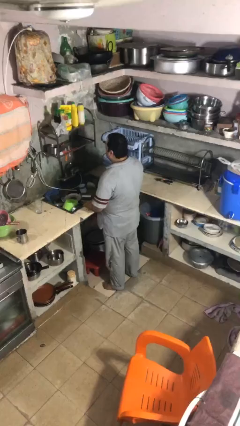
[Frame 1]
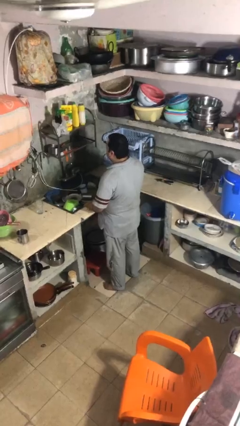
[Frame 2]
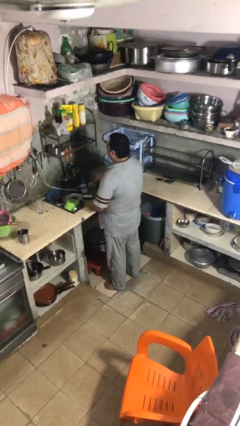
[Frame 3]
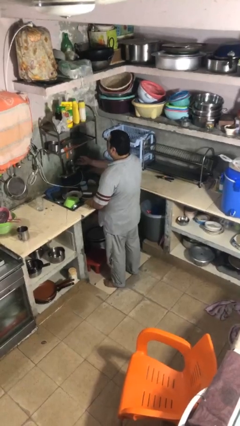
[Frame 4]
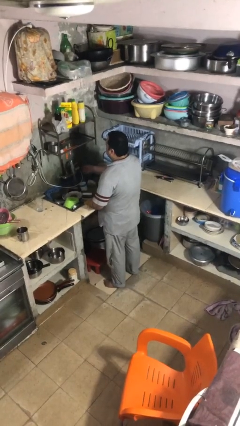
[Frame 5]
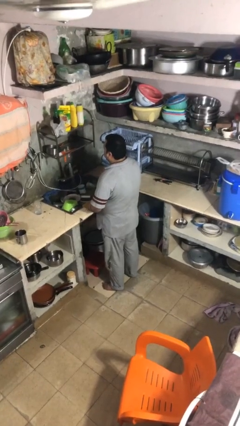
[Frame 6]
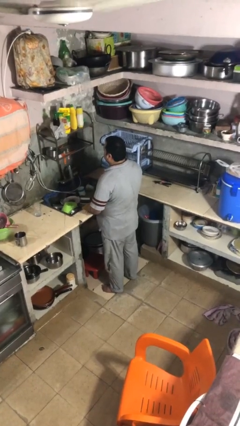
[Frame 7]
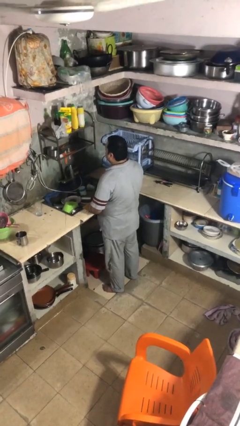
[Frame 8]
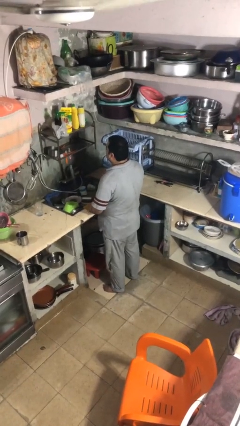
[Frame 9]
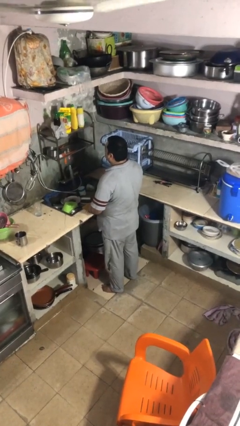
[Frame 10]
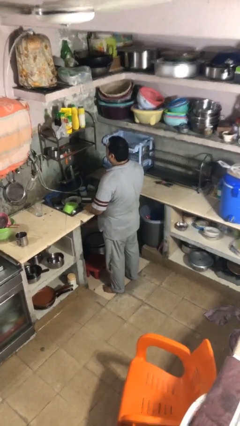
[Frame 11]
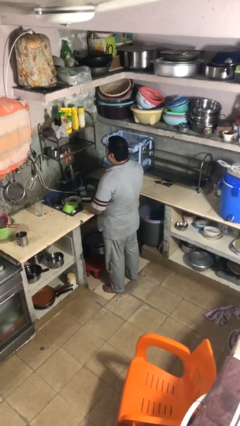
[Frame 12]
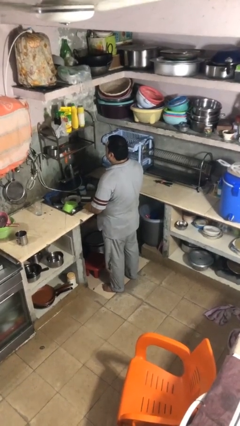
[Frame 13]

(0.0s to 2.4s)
person turns on faucet

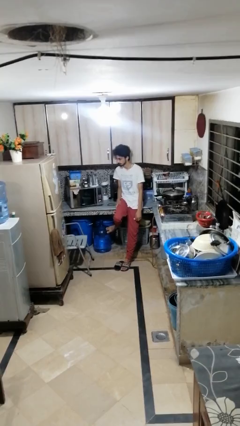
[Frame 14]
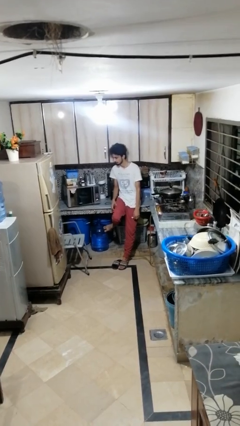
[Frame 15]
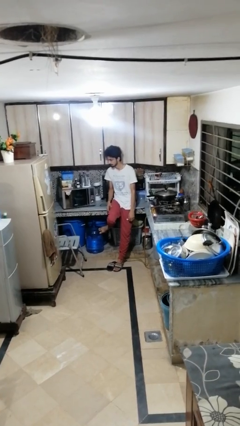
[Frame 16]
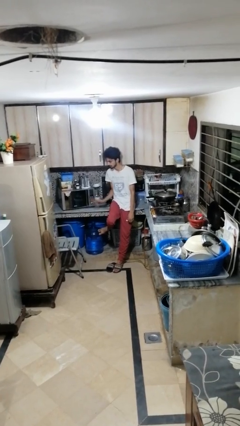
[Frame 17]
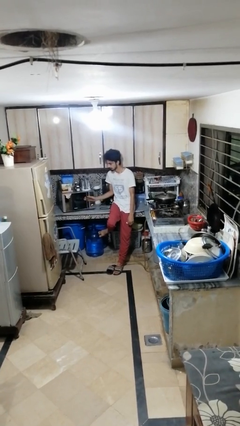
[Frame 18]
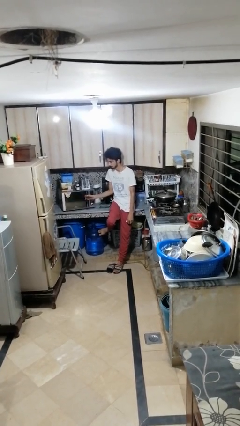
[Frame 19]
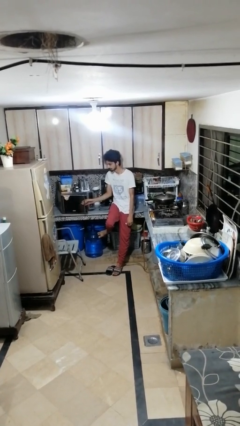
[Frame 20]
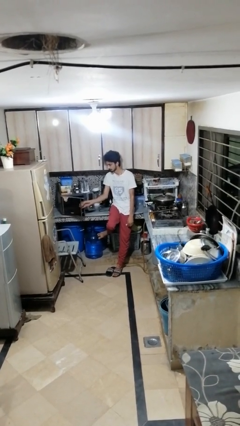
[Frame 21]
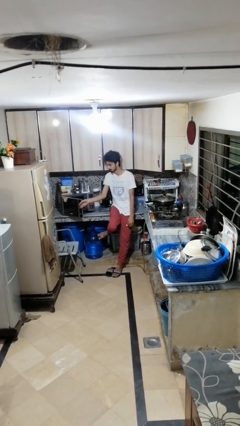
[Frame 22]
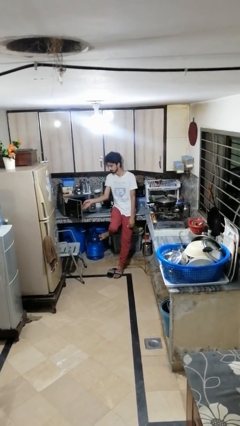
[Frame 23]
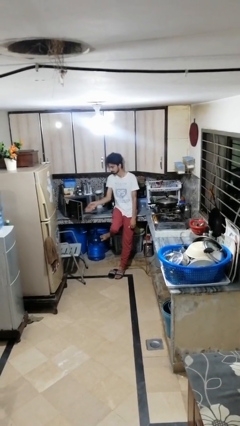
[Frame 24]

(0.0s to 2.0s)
person opens oven door

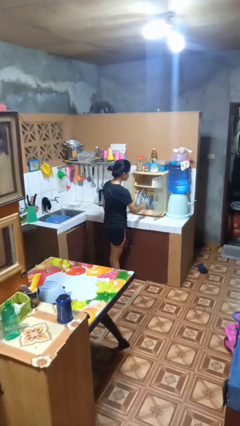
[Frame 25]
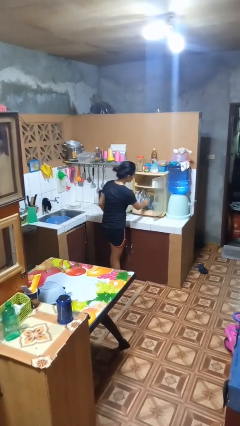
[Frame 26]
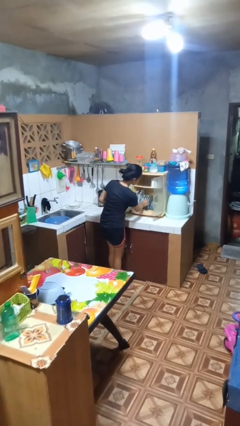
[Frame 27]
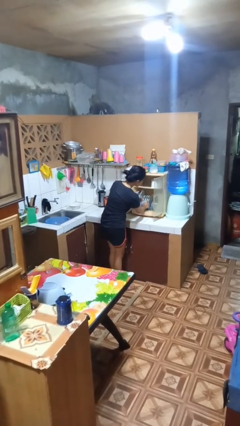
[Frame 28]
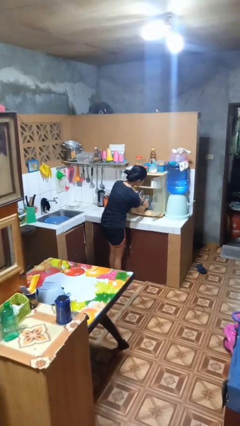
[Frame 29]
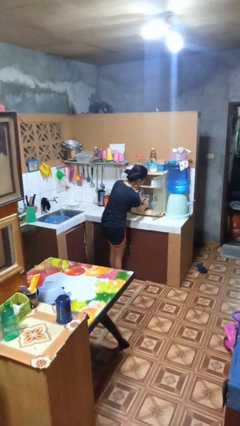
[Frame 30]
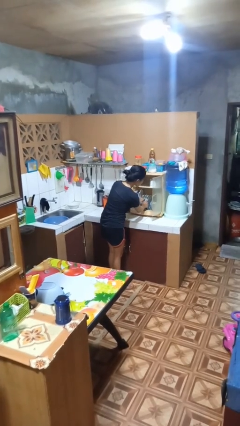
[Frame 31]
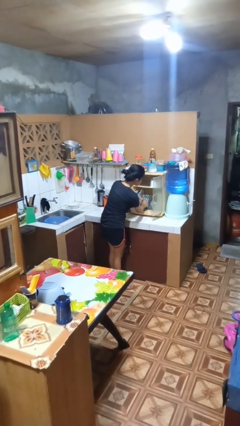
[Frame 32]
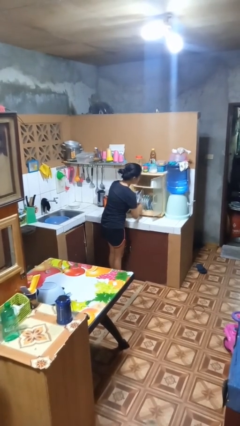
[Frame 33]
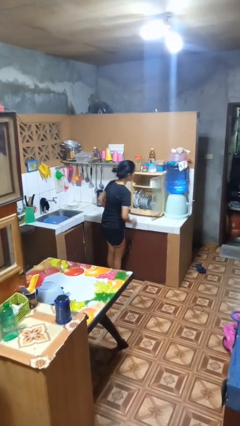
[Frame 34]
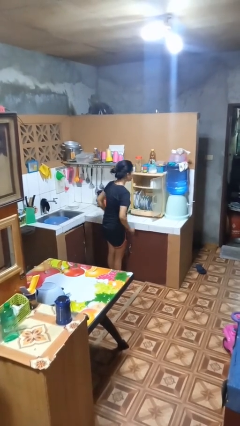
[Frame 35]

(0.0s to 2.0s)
person searches in kitchen drawer

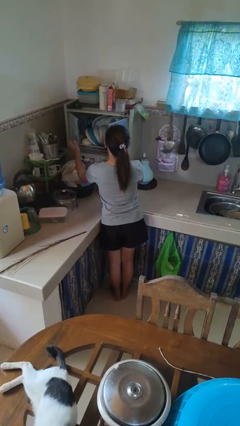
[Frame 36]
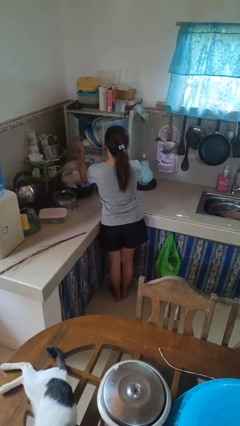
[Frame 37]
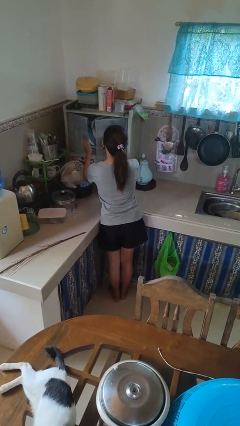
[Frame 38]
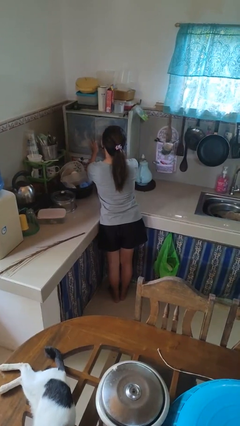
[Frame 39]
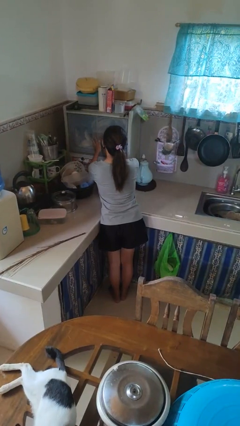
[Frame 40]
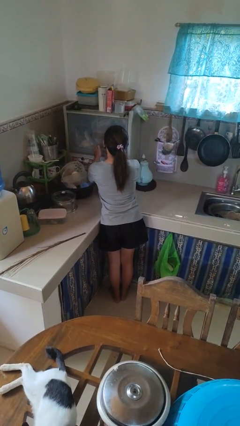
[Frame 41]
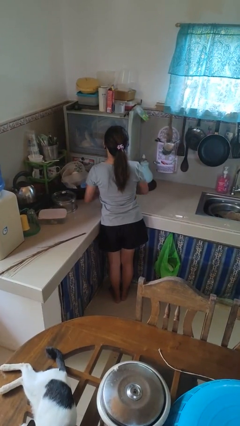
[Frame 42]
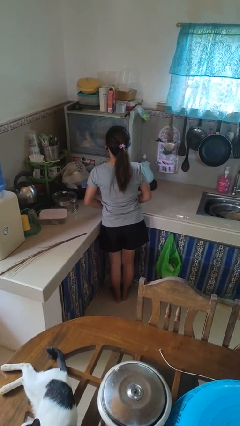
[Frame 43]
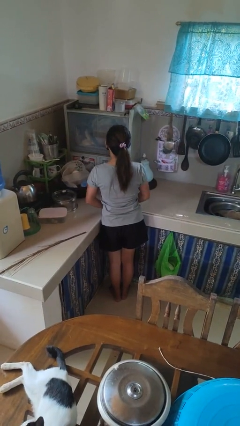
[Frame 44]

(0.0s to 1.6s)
person closes kitchen drawer

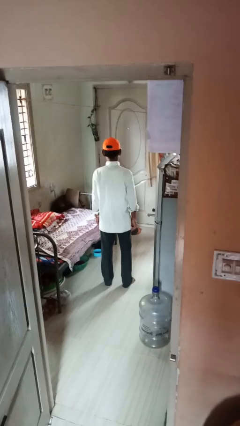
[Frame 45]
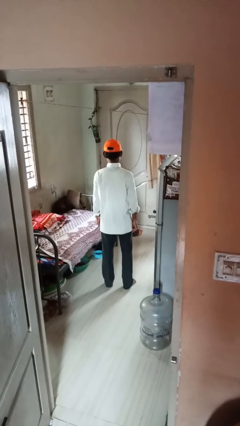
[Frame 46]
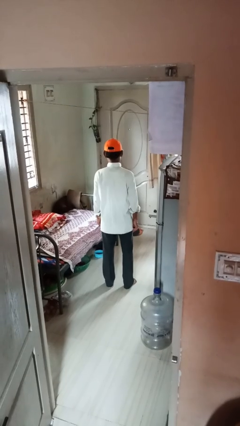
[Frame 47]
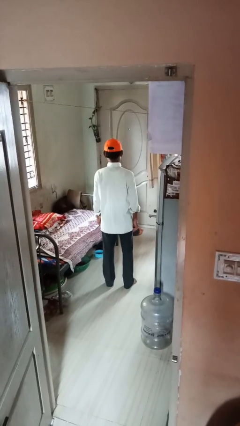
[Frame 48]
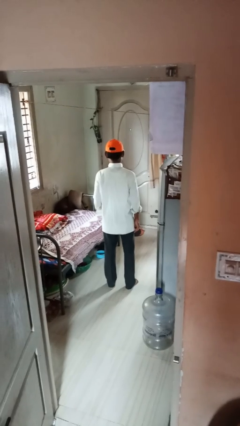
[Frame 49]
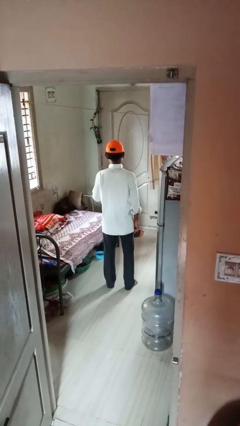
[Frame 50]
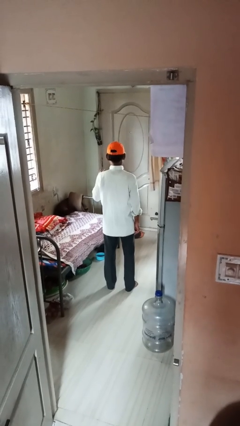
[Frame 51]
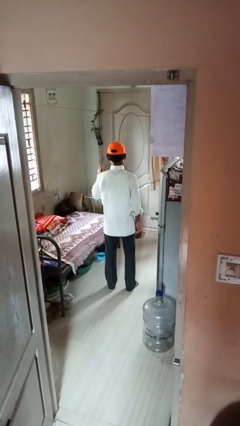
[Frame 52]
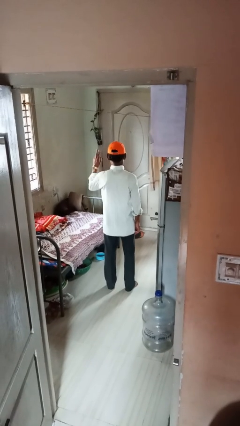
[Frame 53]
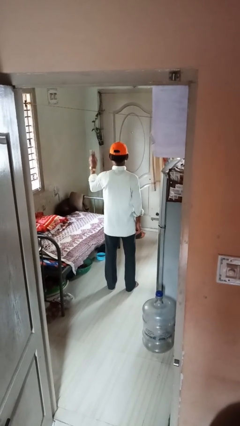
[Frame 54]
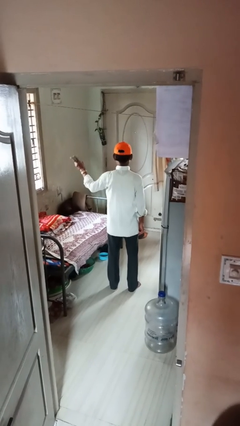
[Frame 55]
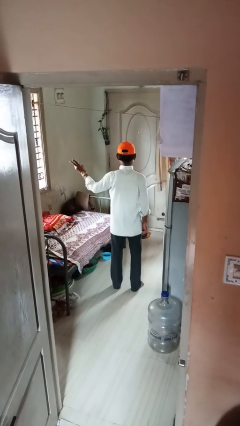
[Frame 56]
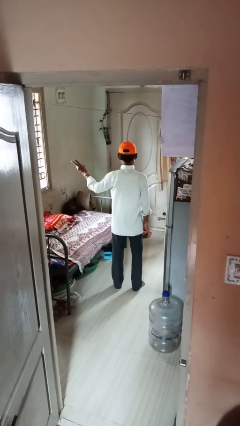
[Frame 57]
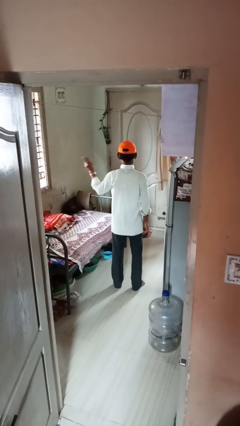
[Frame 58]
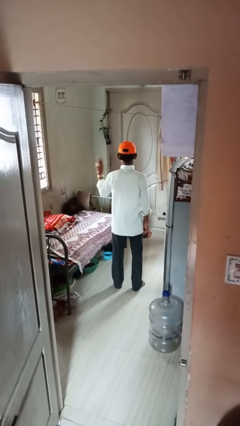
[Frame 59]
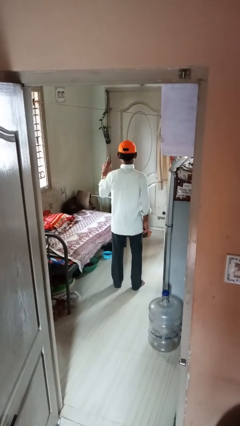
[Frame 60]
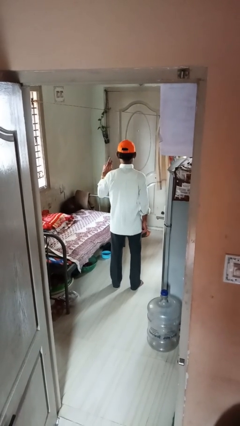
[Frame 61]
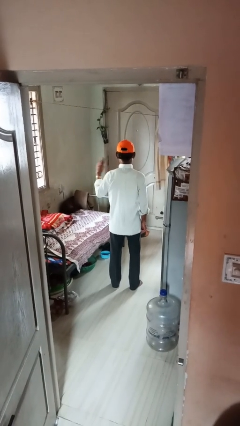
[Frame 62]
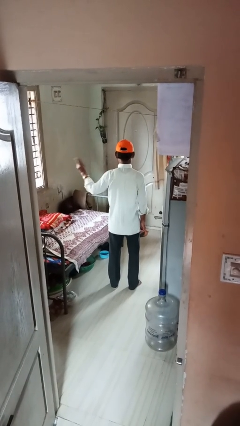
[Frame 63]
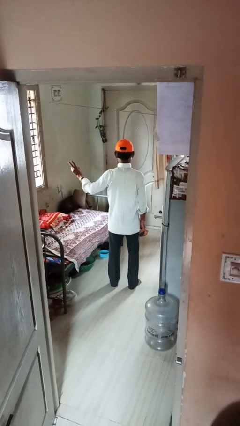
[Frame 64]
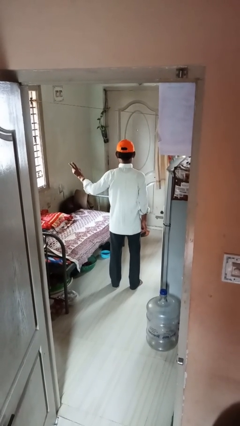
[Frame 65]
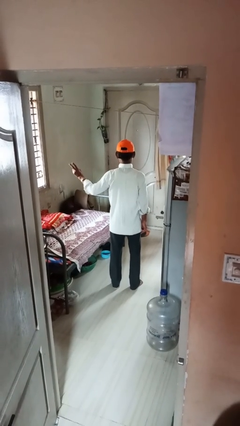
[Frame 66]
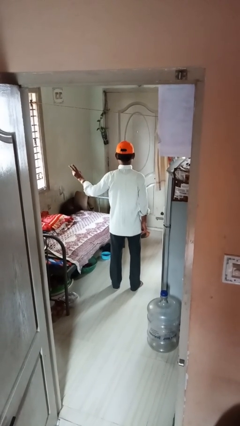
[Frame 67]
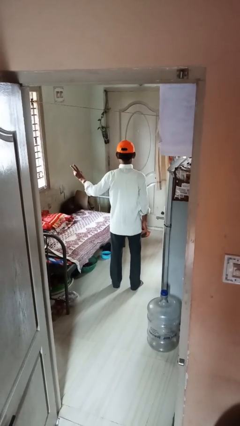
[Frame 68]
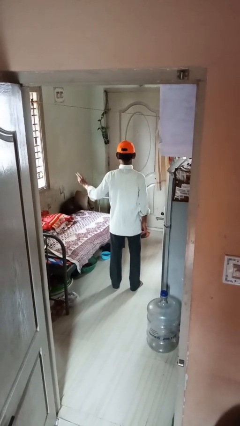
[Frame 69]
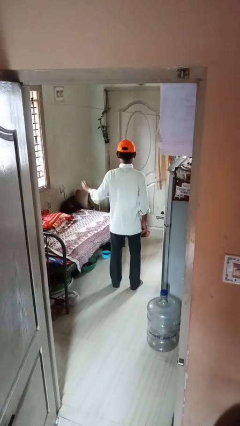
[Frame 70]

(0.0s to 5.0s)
person gestures swipe left

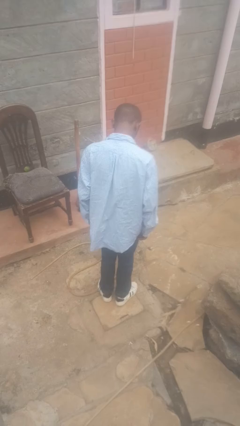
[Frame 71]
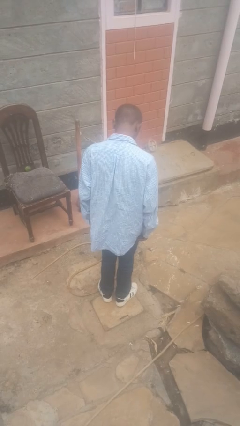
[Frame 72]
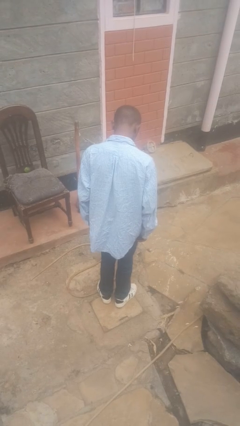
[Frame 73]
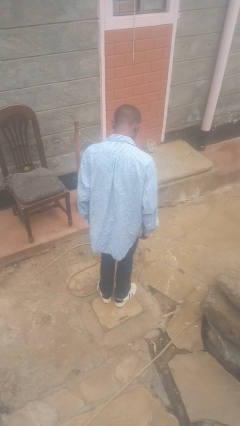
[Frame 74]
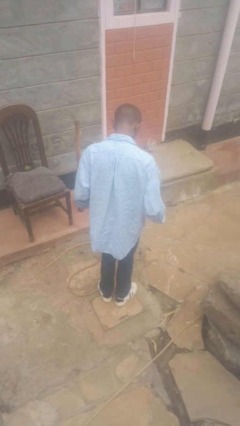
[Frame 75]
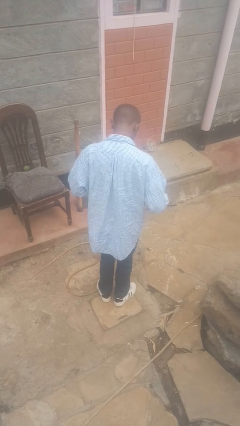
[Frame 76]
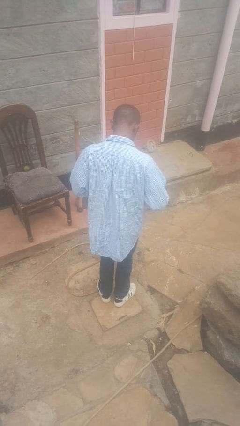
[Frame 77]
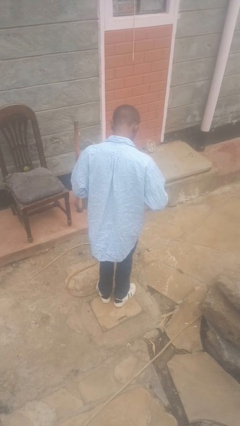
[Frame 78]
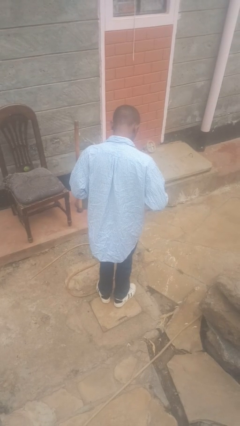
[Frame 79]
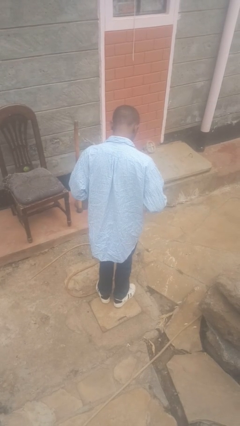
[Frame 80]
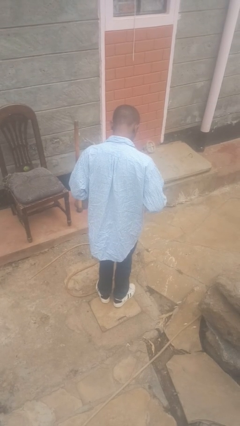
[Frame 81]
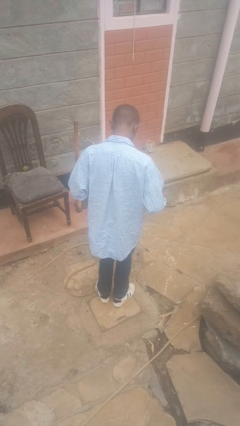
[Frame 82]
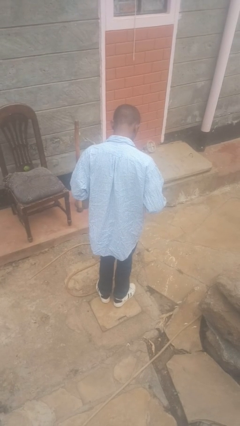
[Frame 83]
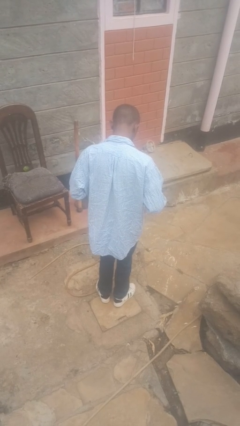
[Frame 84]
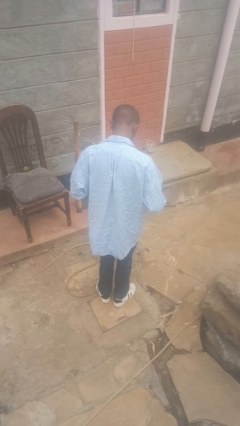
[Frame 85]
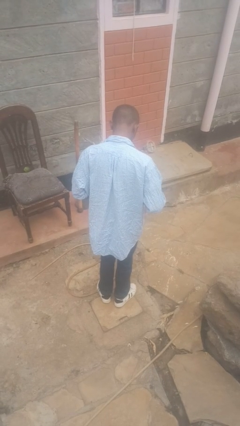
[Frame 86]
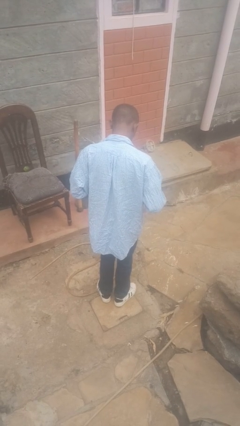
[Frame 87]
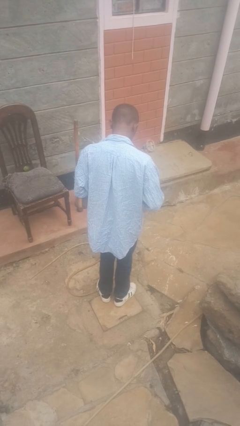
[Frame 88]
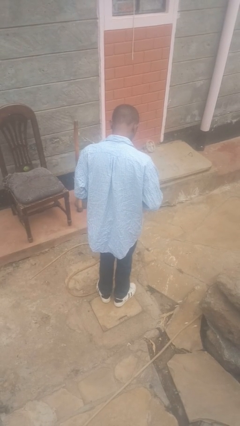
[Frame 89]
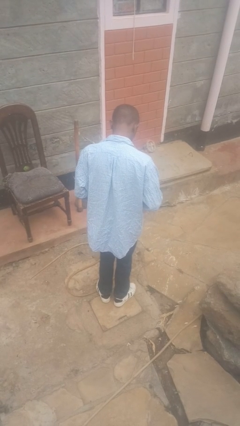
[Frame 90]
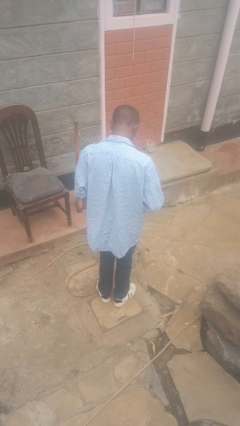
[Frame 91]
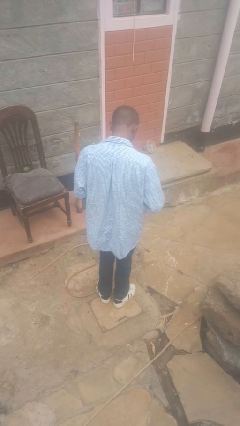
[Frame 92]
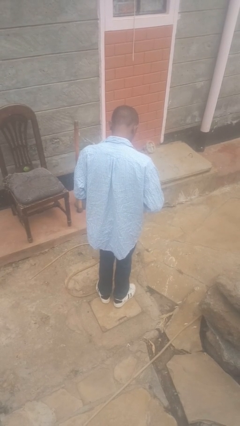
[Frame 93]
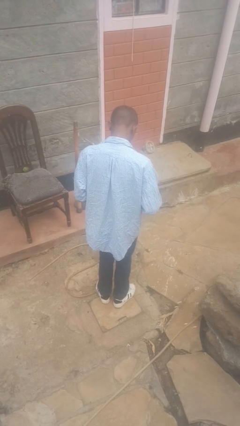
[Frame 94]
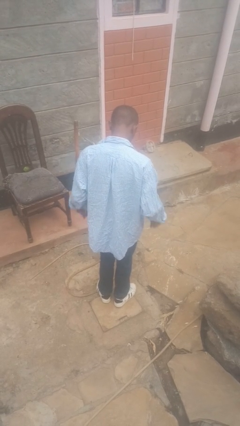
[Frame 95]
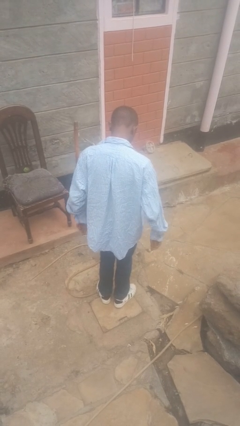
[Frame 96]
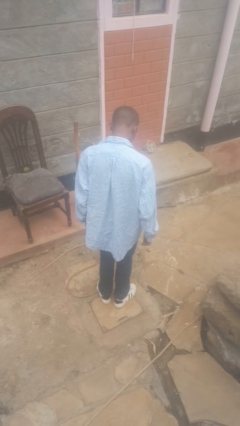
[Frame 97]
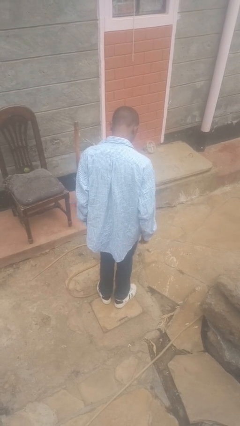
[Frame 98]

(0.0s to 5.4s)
person unbuttons shirt
